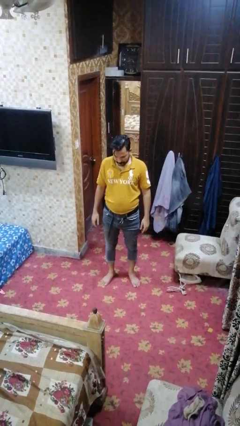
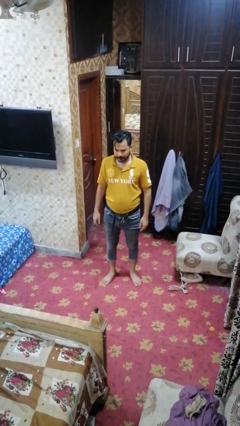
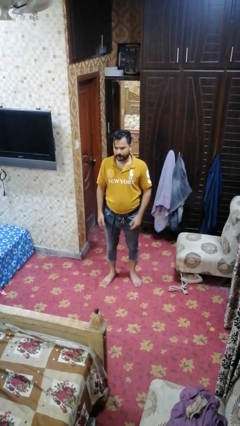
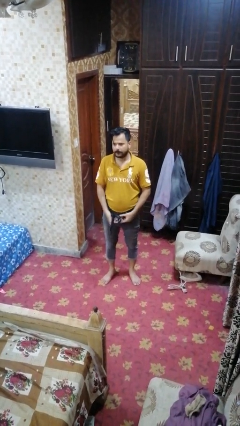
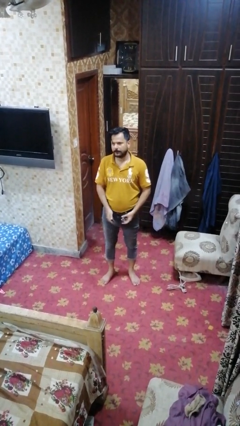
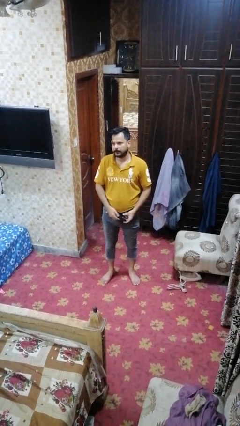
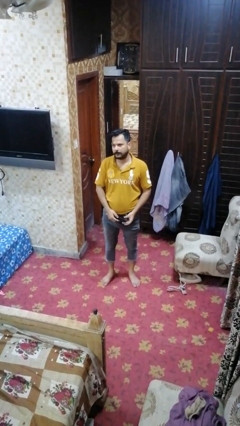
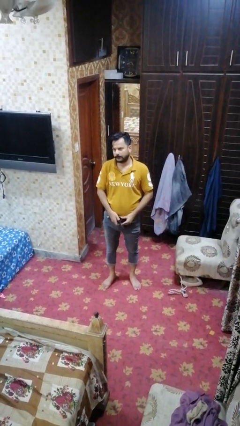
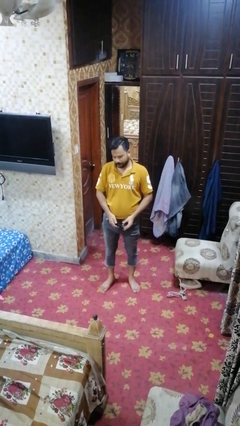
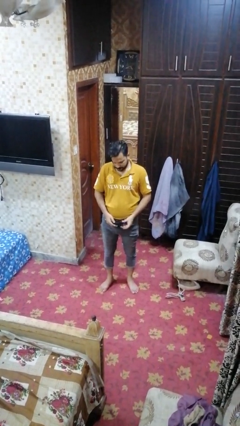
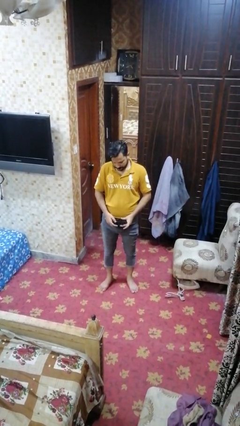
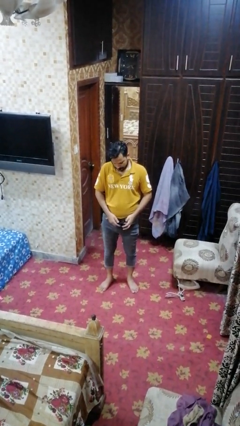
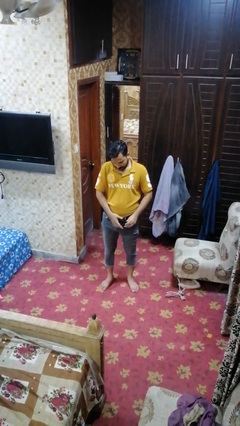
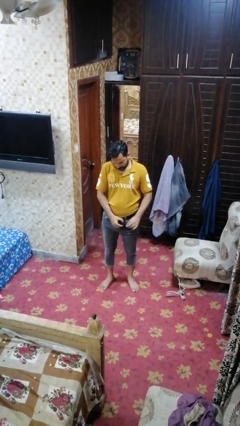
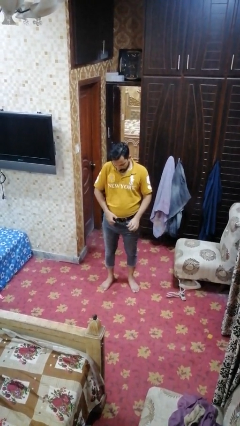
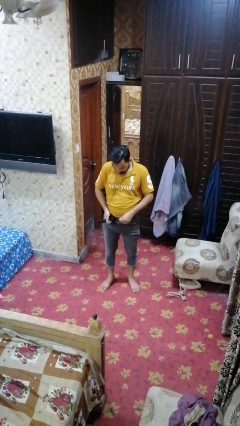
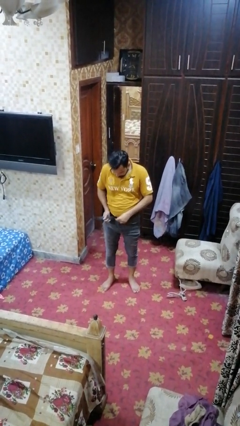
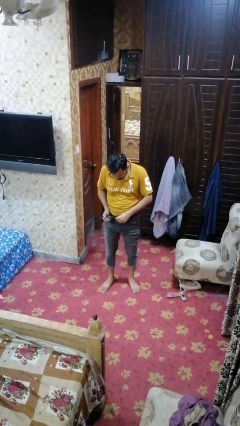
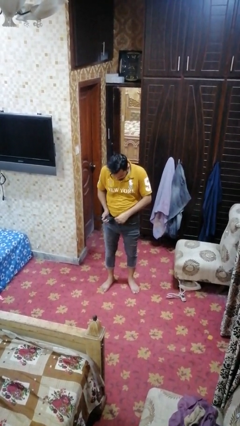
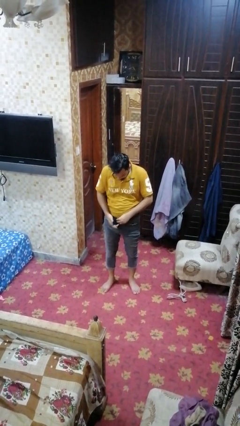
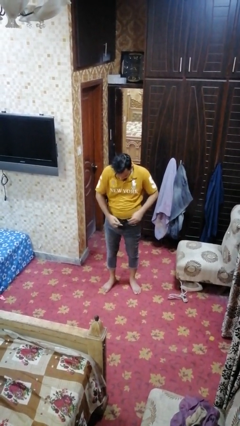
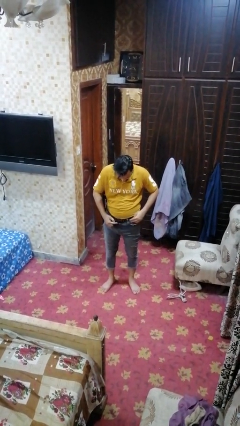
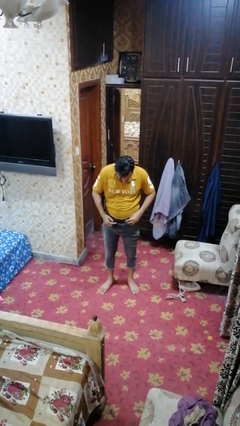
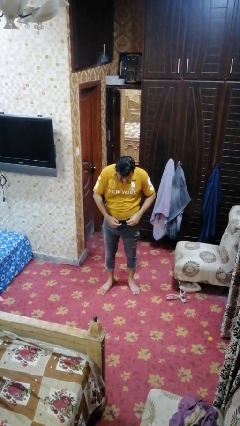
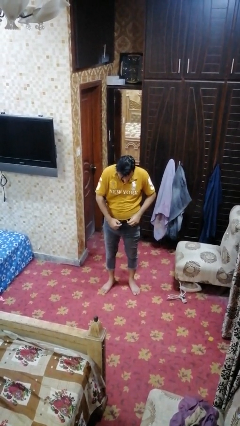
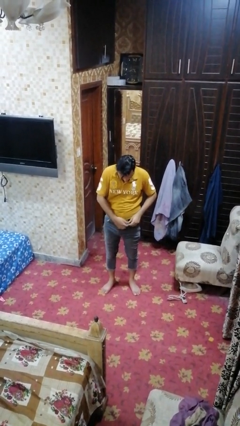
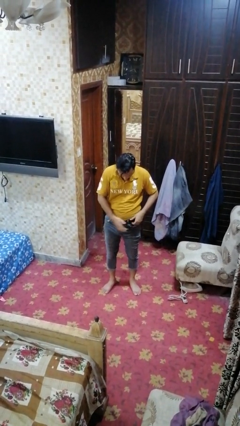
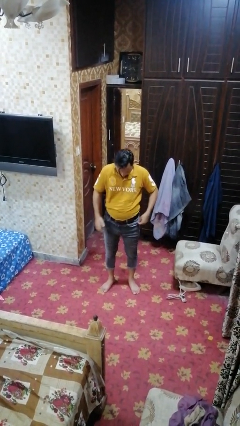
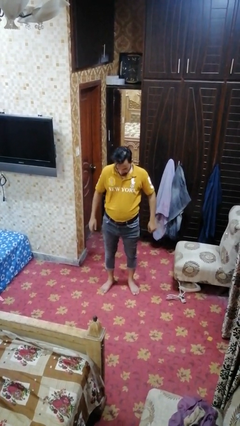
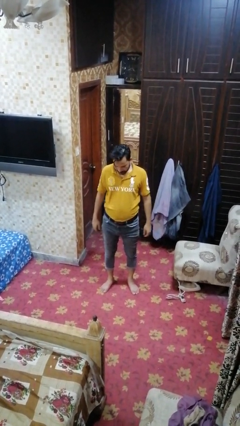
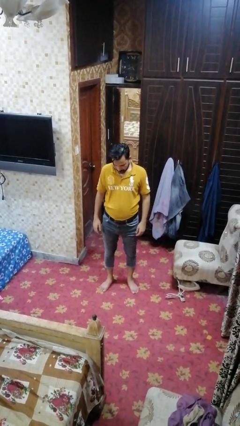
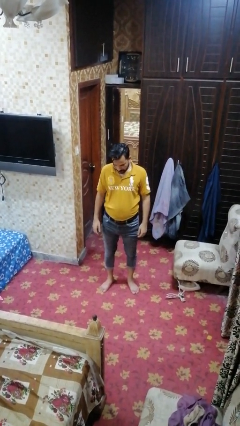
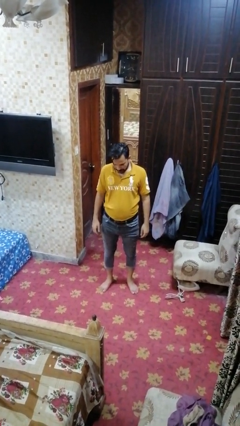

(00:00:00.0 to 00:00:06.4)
person puts on belt

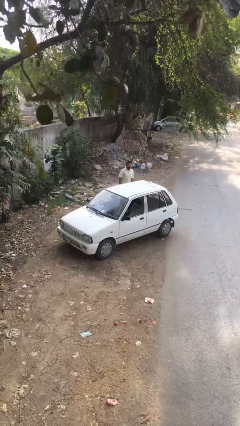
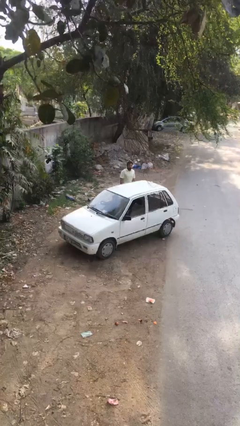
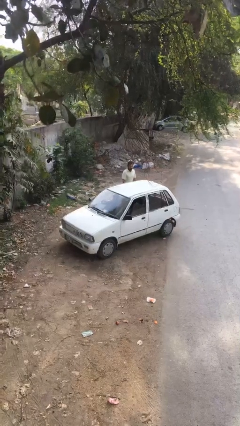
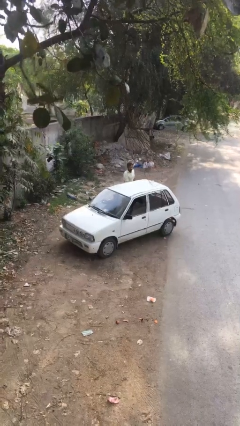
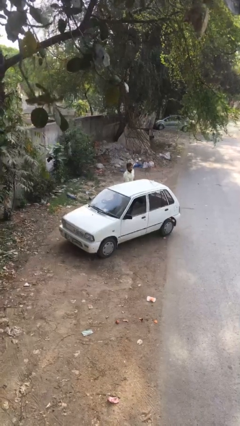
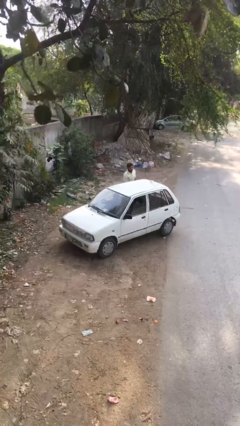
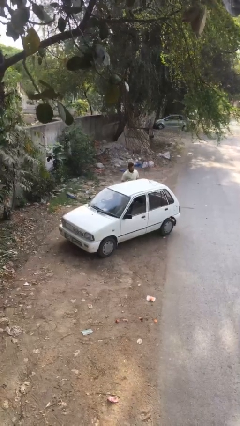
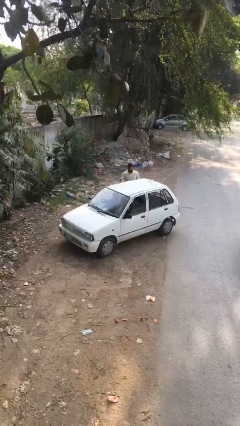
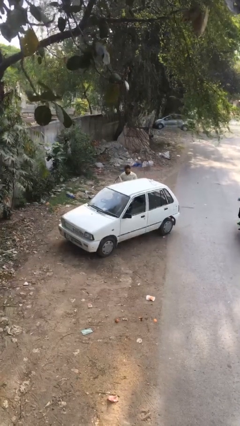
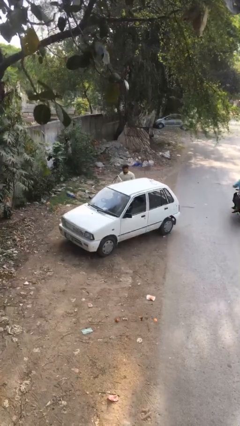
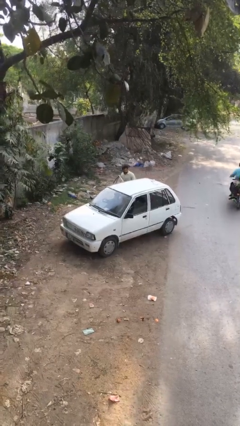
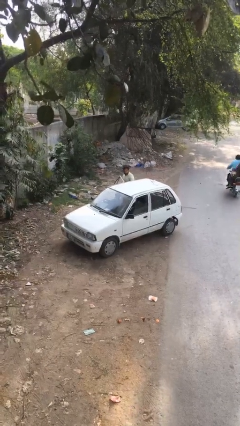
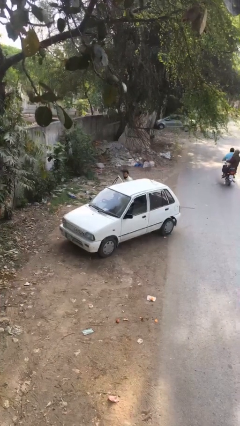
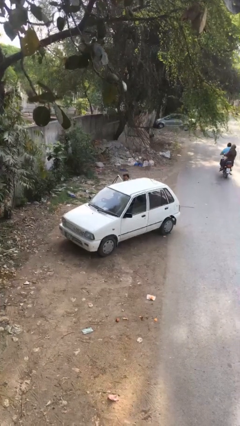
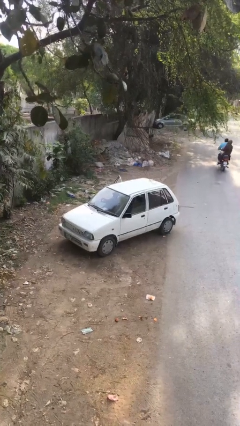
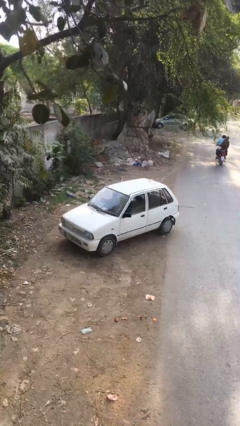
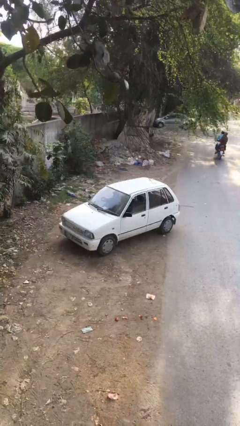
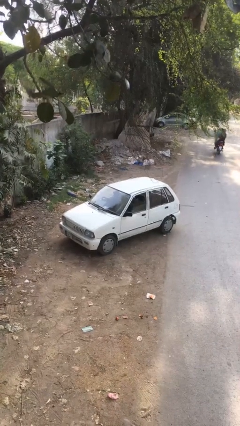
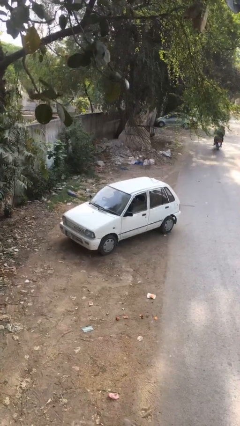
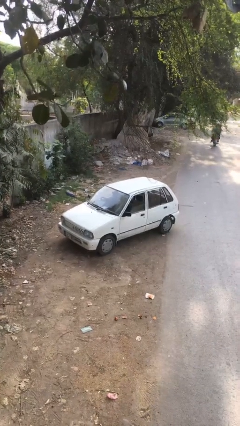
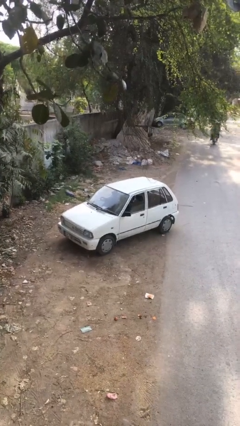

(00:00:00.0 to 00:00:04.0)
car picks up person

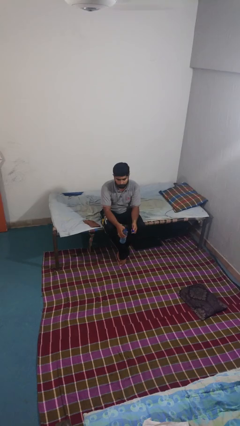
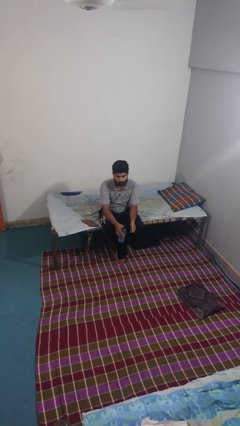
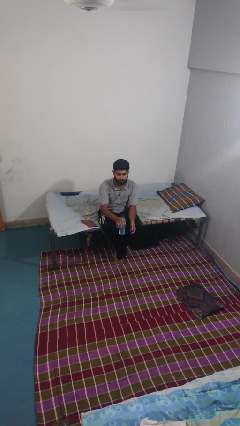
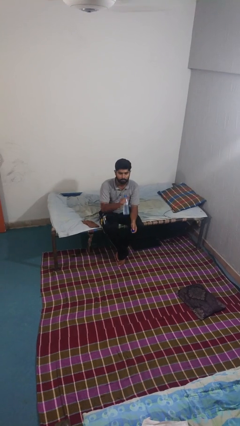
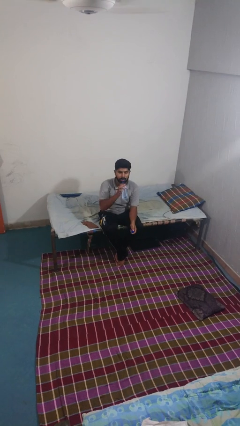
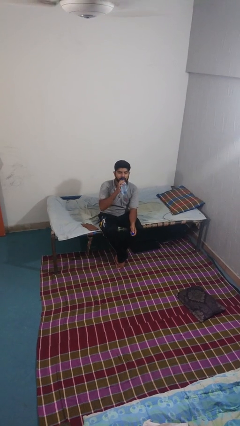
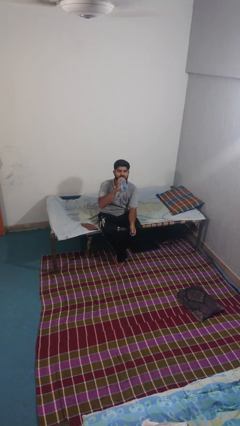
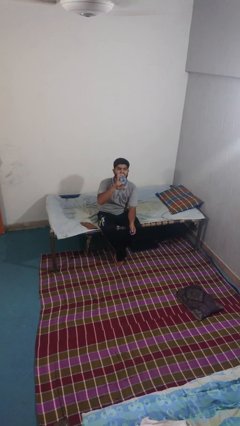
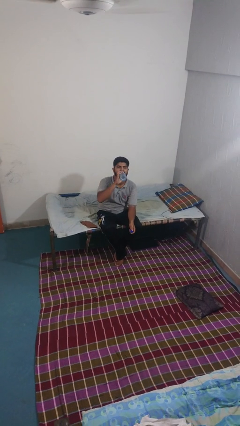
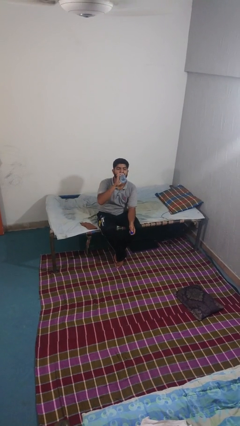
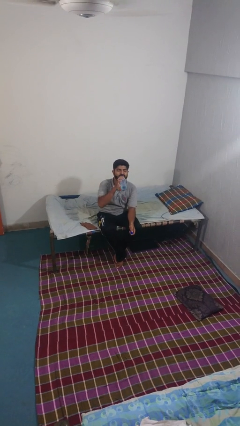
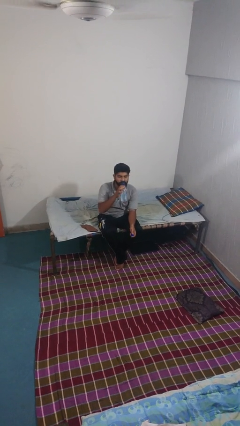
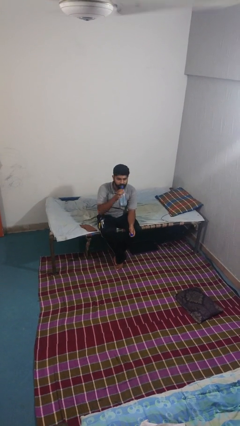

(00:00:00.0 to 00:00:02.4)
person drinks from bottle

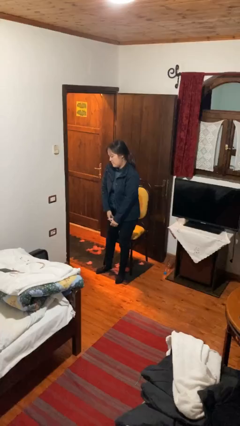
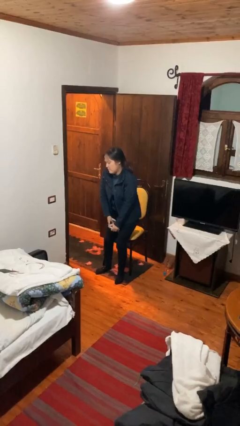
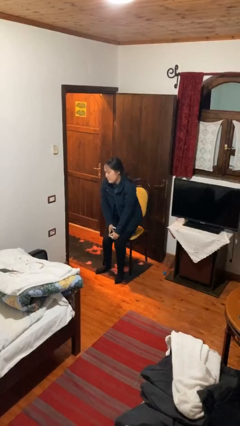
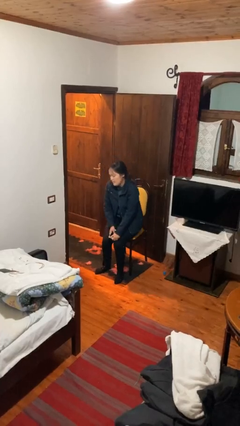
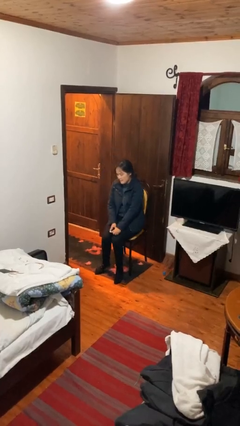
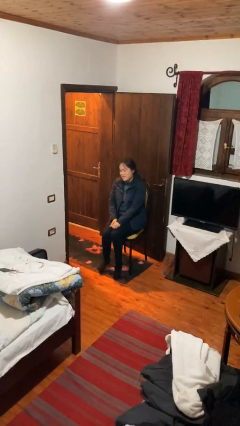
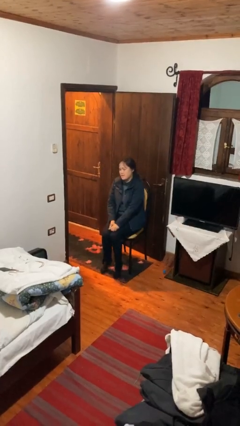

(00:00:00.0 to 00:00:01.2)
person sits down

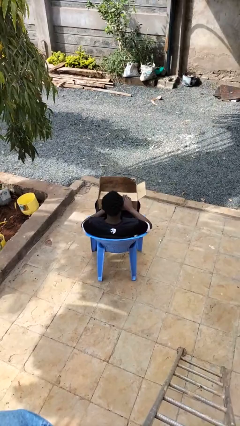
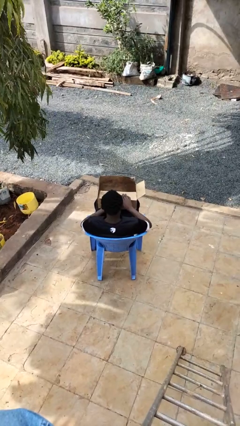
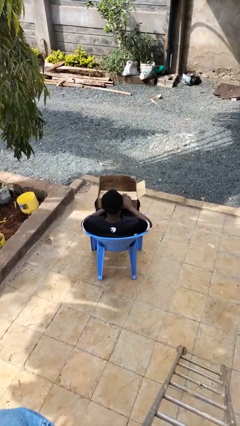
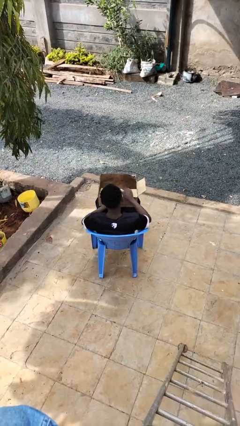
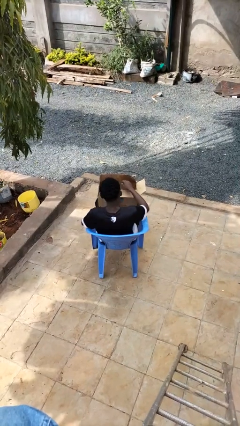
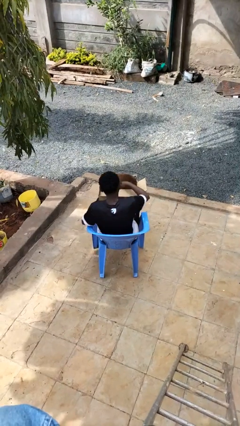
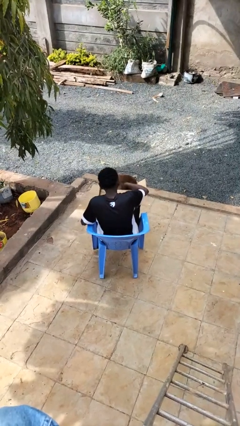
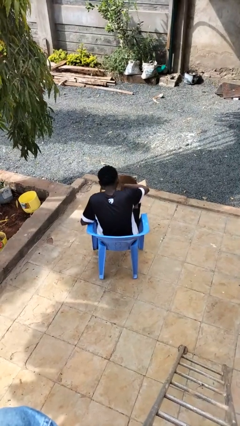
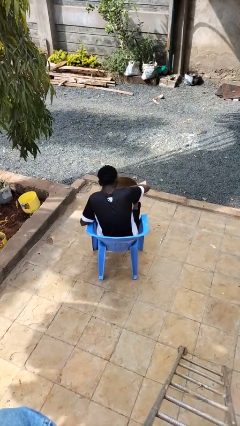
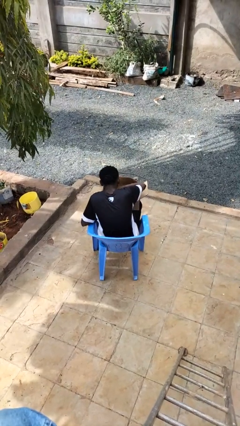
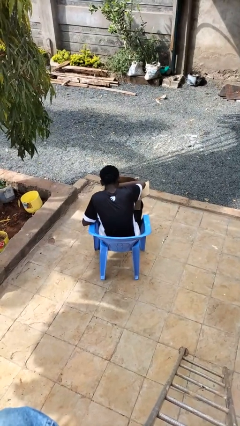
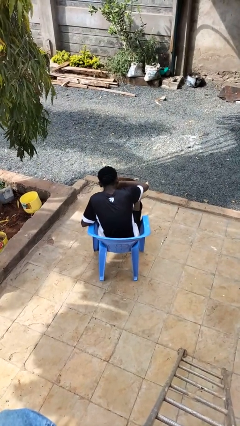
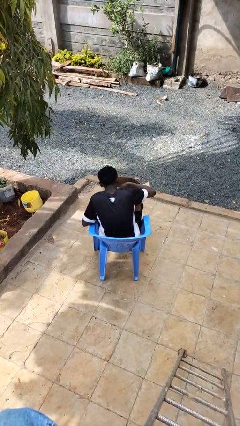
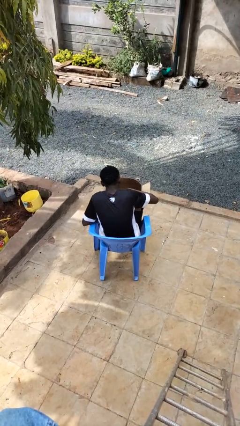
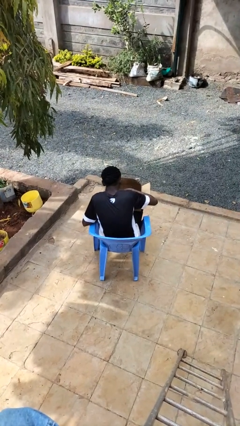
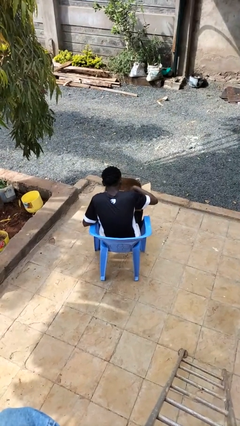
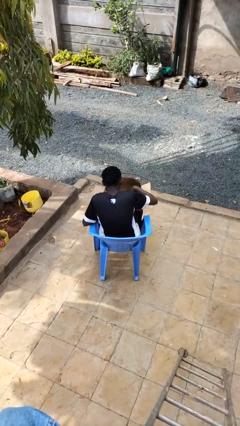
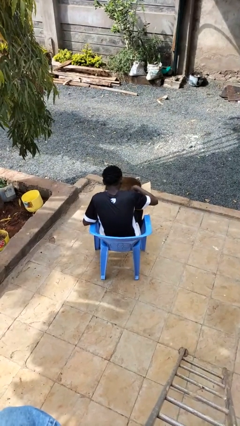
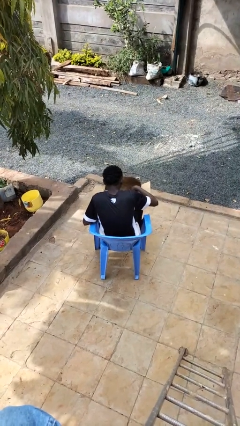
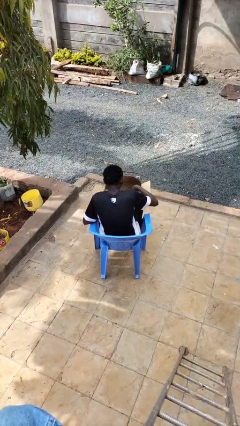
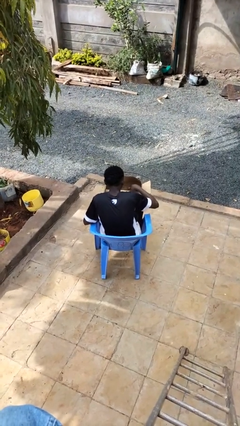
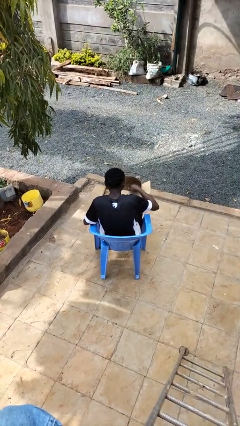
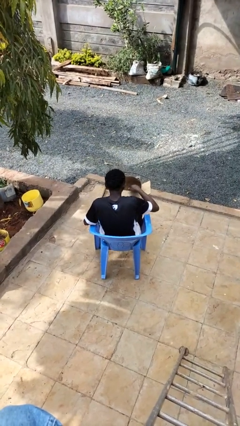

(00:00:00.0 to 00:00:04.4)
person searches in box
